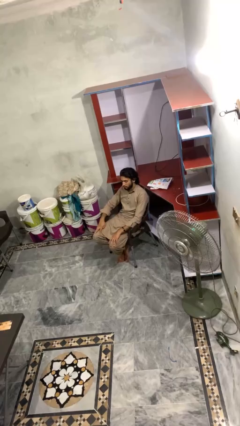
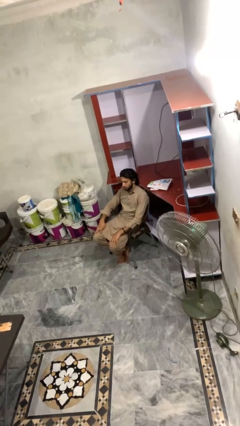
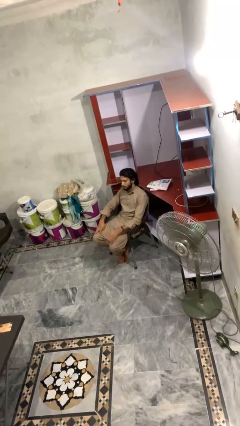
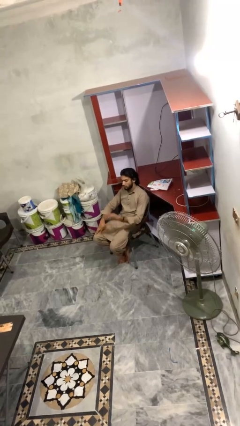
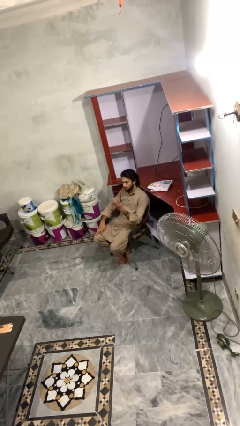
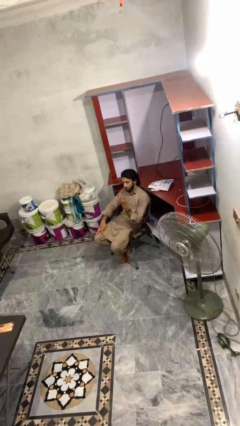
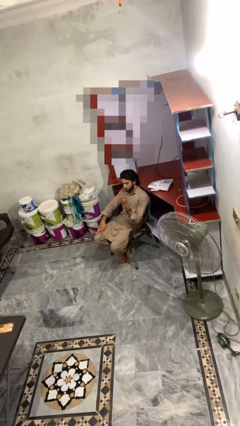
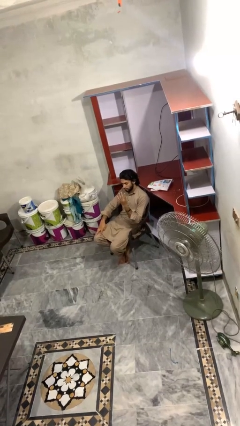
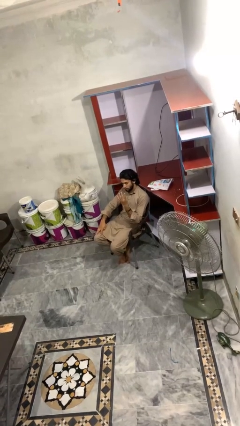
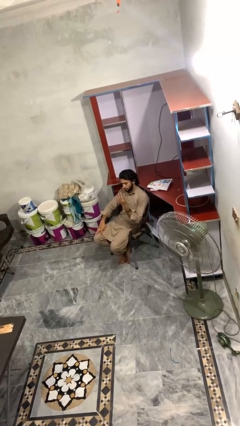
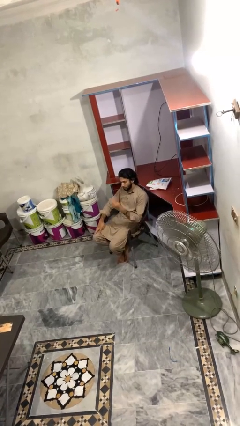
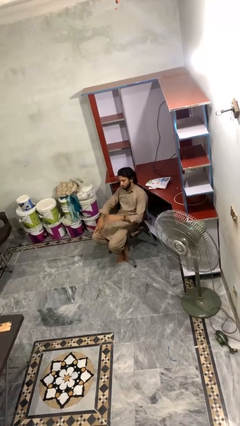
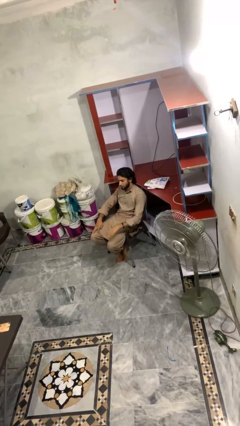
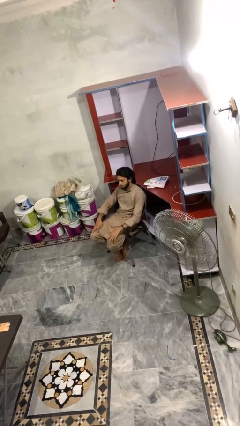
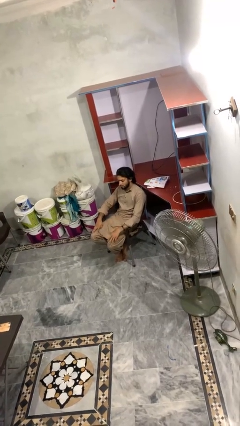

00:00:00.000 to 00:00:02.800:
person gestures number four

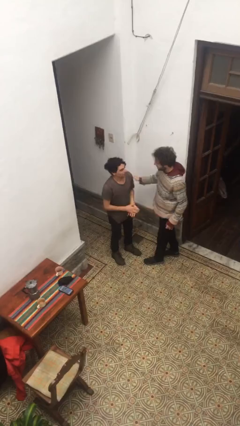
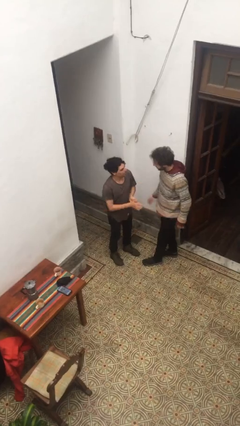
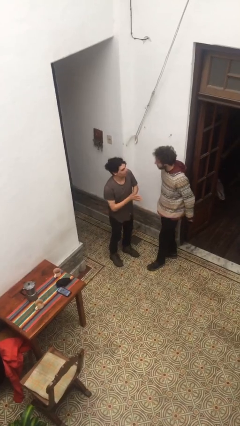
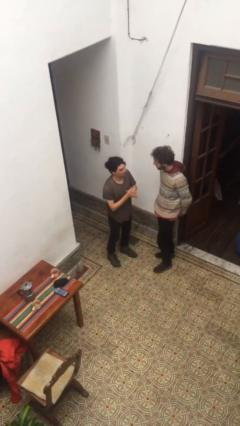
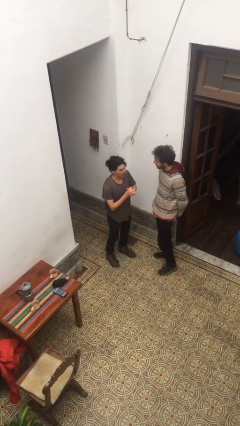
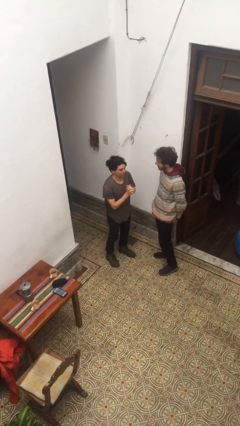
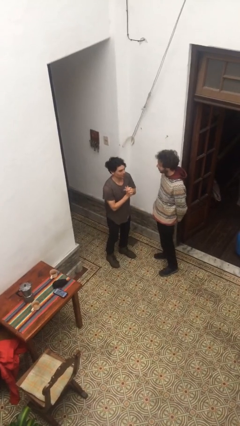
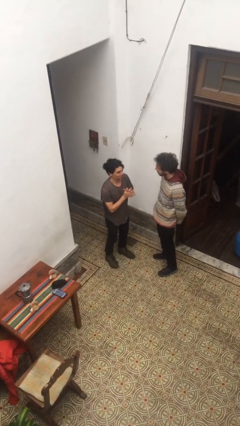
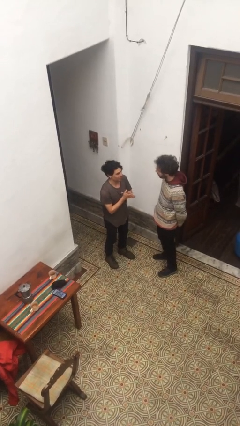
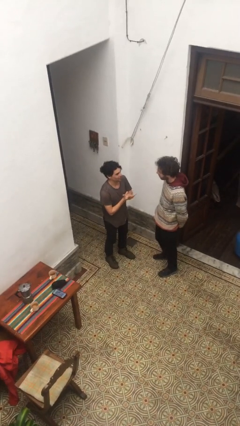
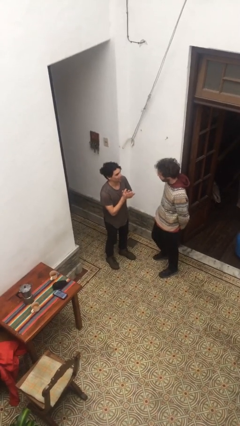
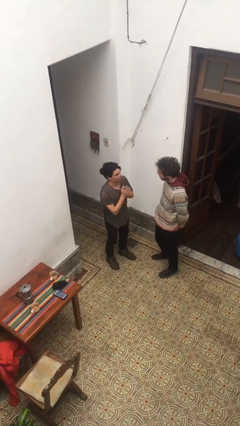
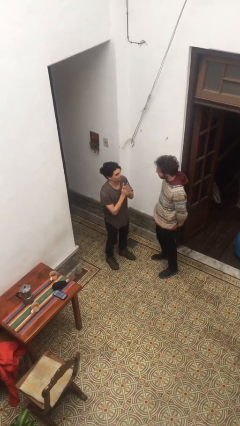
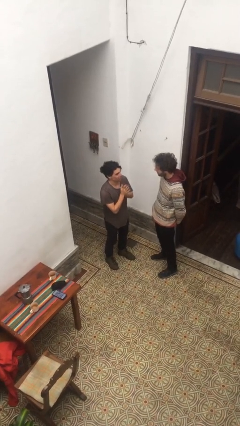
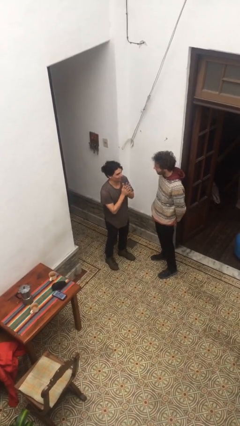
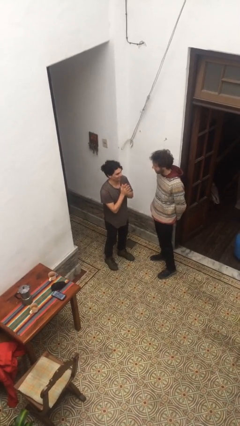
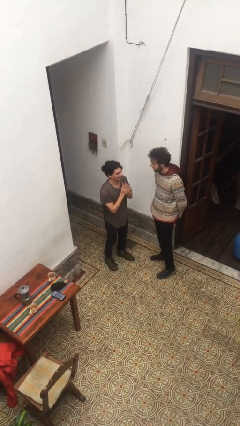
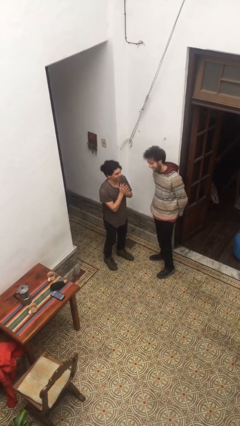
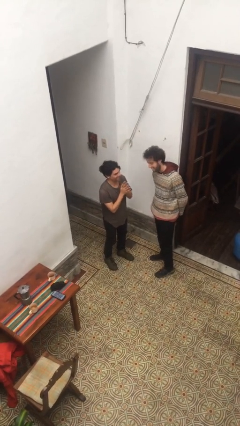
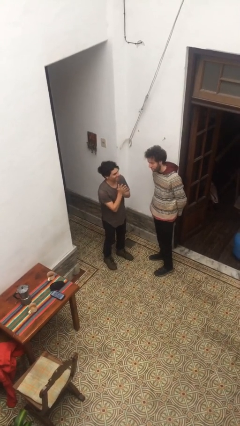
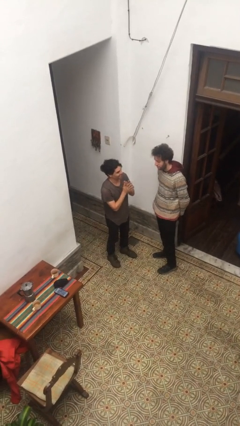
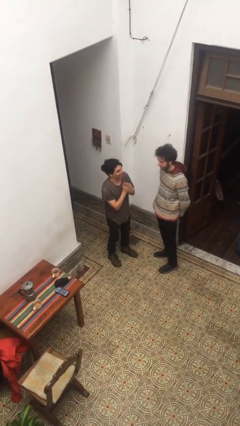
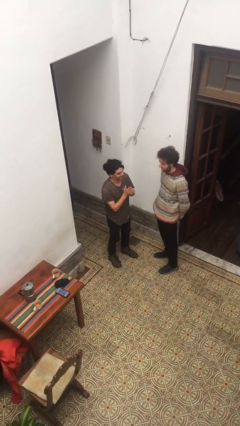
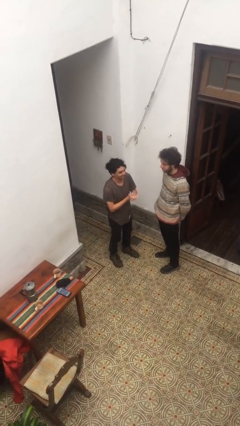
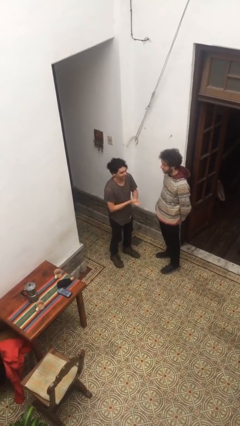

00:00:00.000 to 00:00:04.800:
person talks to person

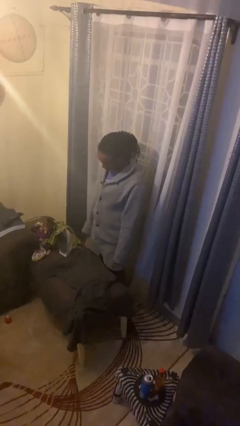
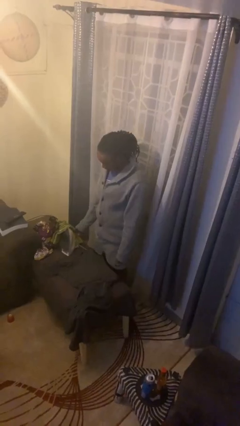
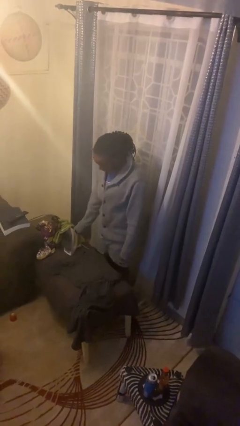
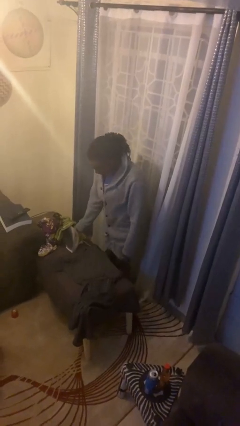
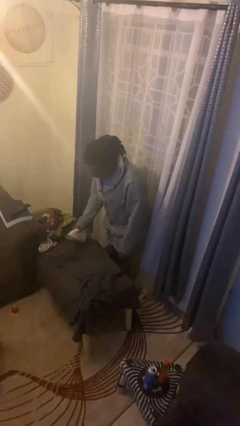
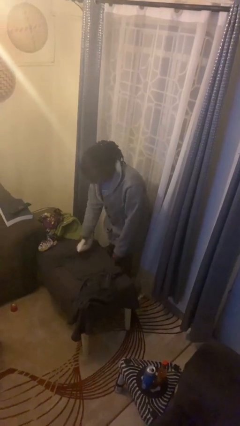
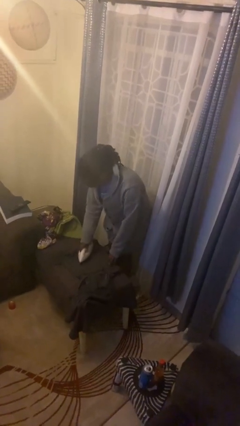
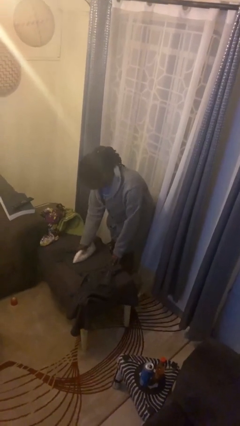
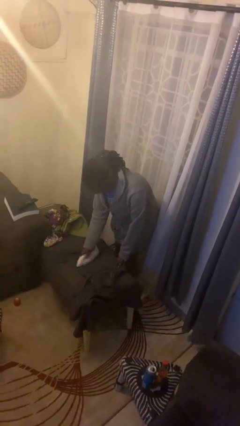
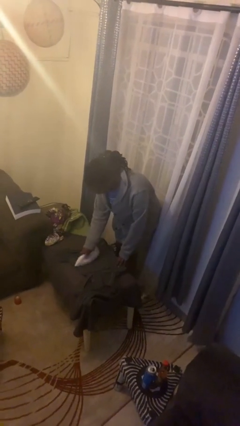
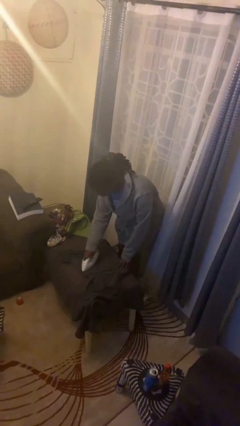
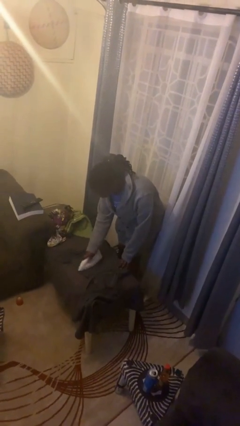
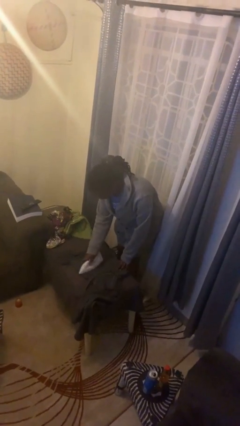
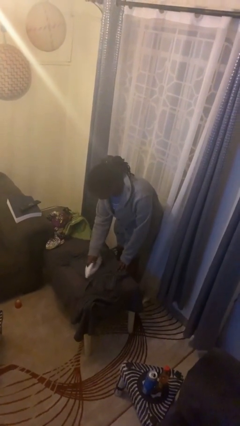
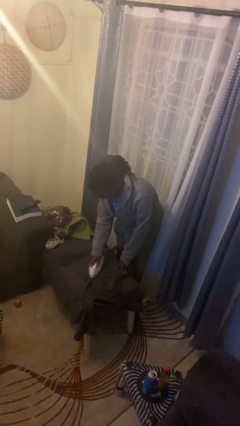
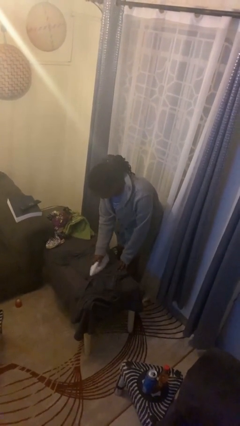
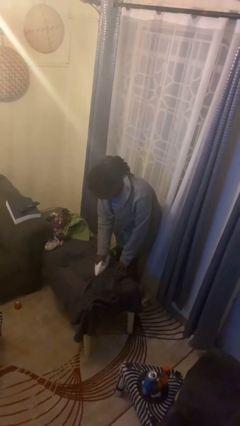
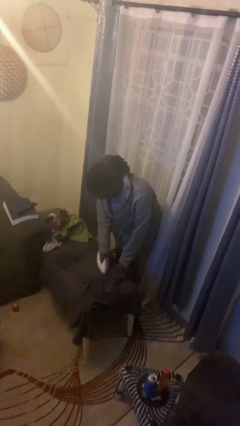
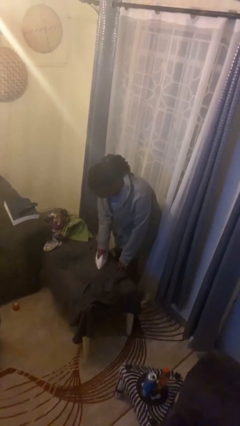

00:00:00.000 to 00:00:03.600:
person irons clothes

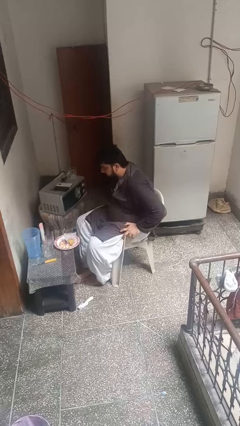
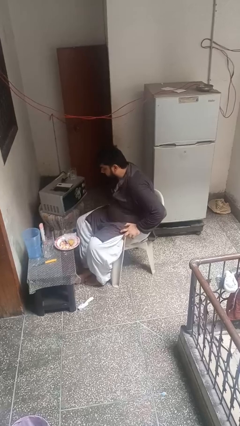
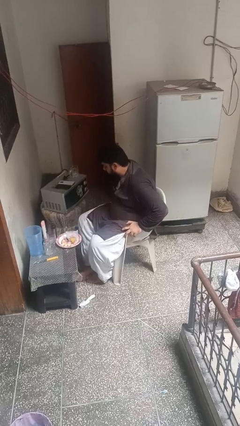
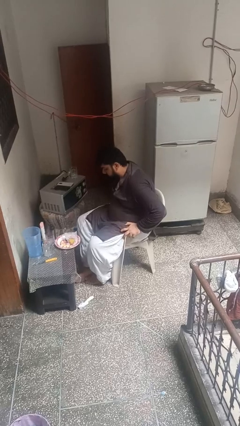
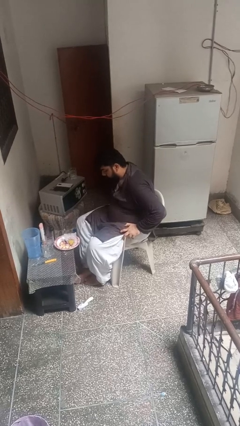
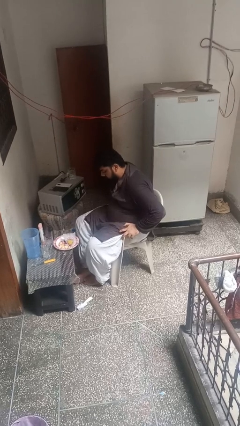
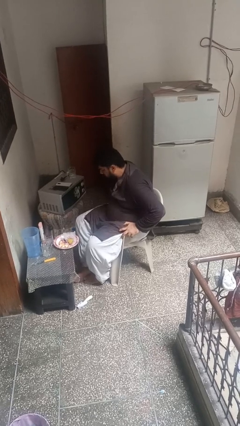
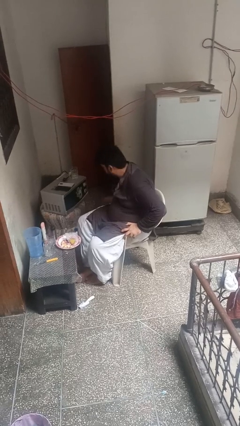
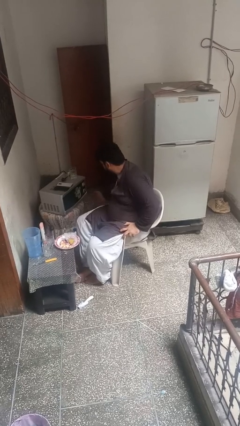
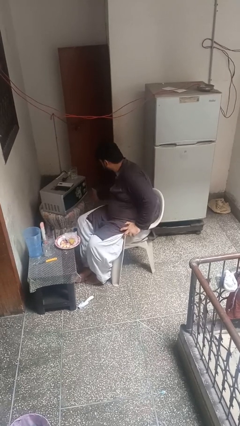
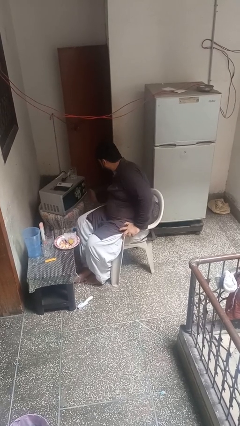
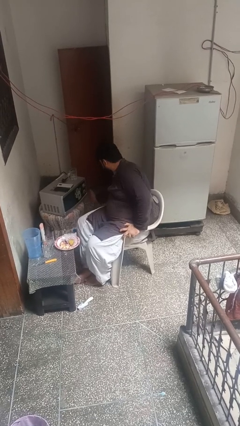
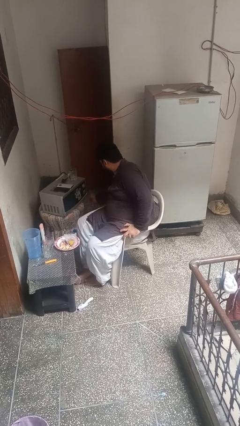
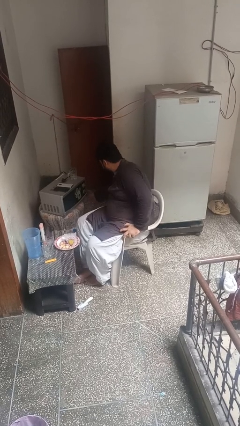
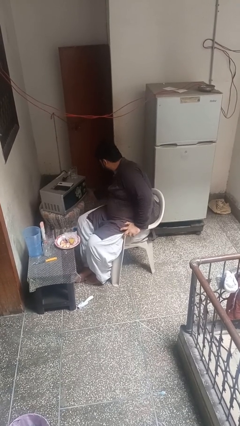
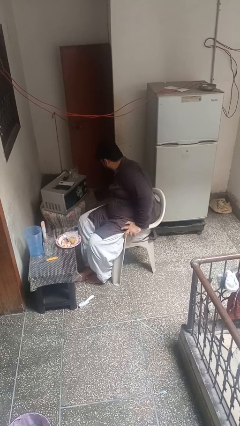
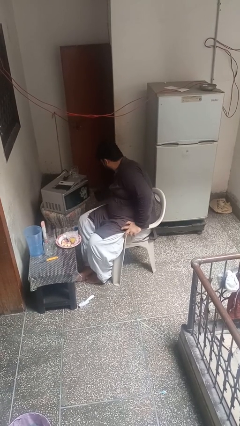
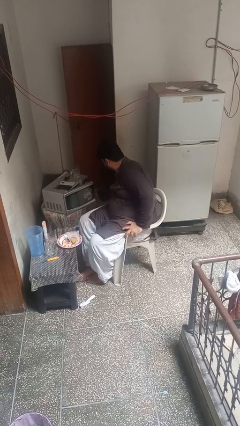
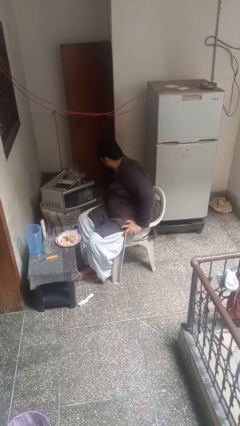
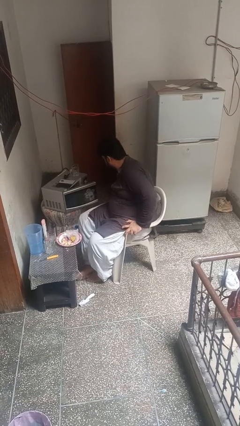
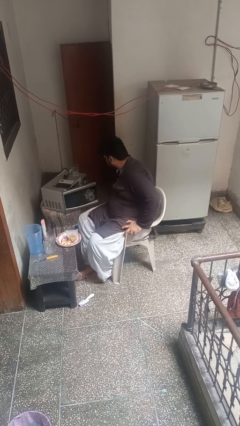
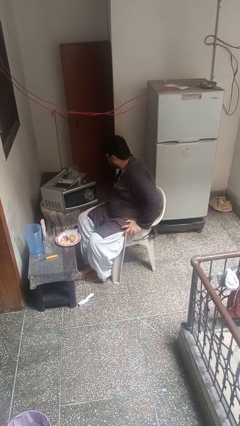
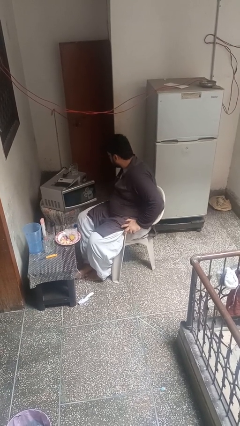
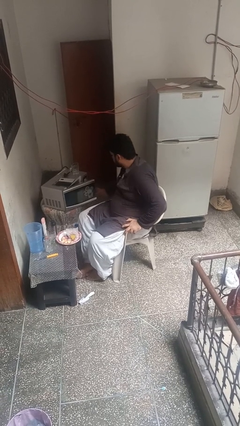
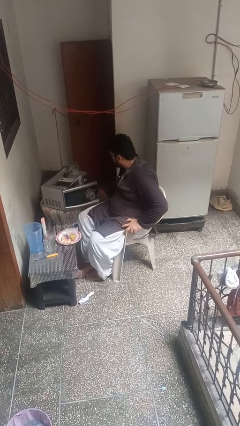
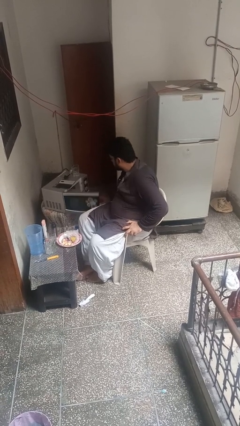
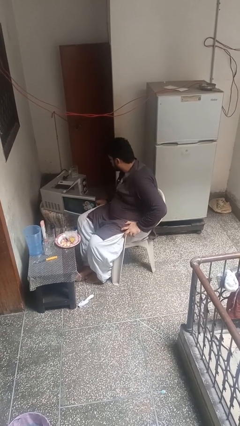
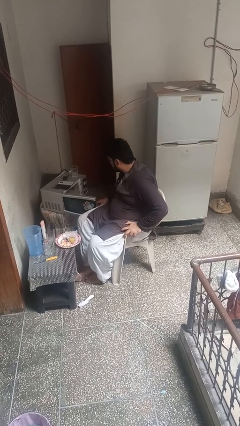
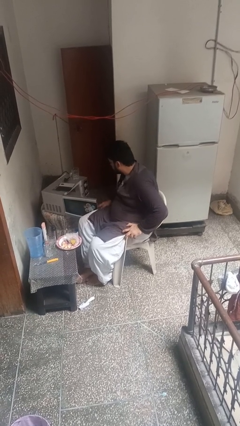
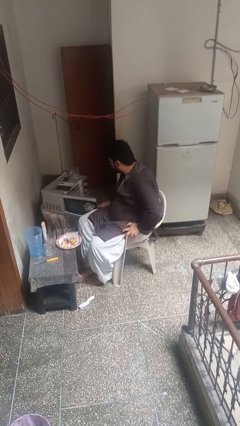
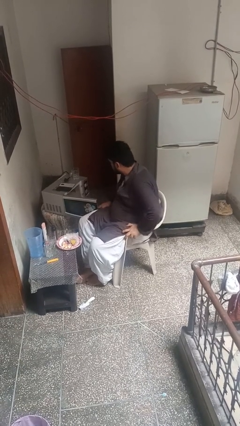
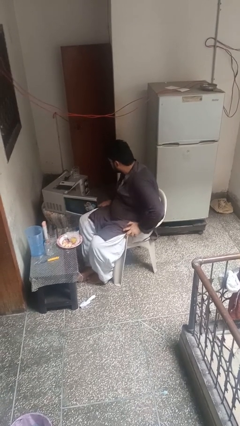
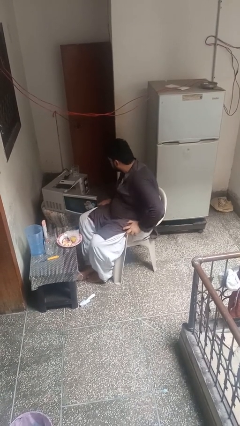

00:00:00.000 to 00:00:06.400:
person opens microwave
